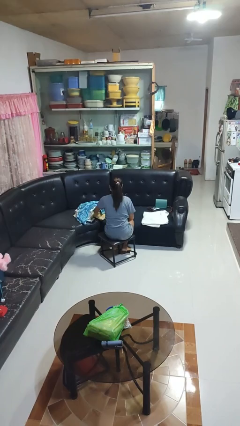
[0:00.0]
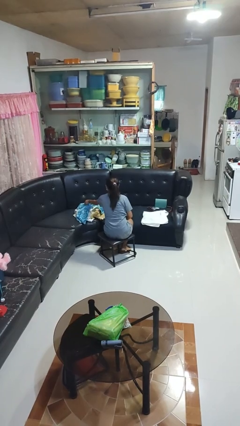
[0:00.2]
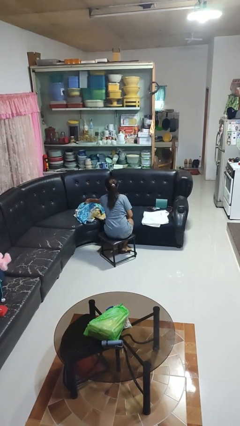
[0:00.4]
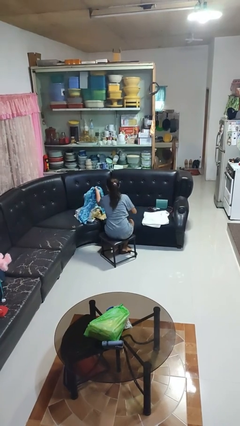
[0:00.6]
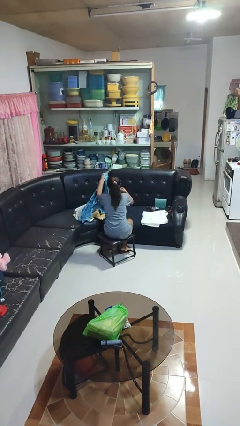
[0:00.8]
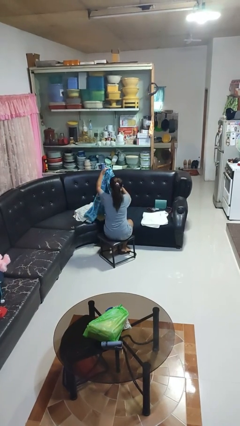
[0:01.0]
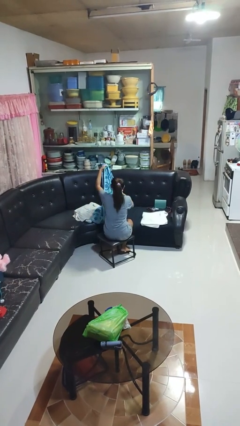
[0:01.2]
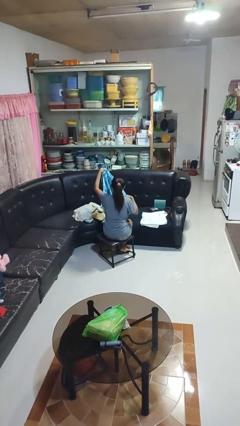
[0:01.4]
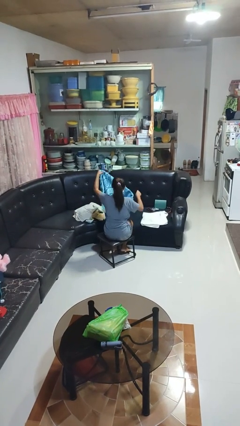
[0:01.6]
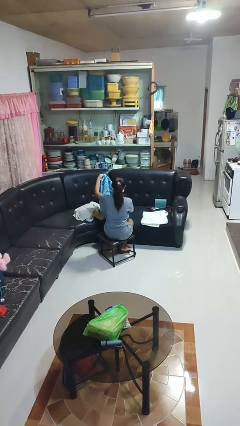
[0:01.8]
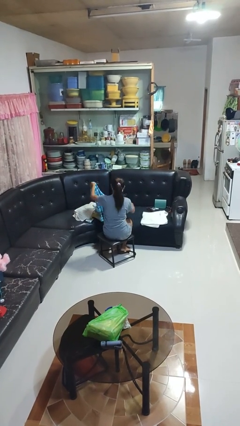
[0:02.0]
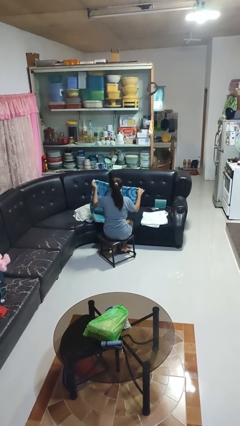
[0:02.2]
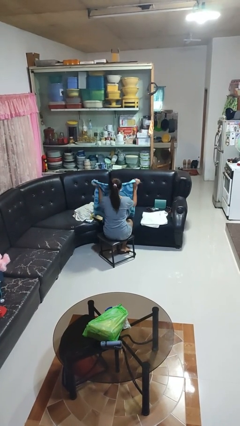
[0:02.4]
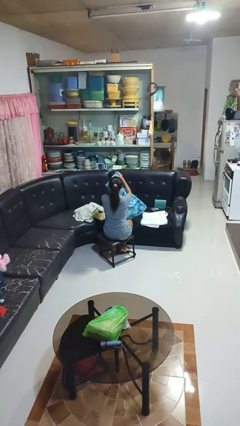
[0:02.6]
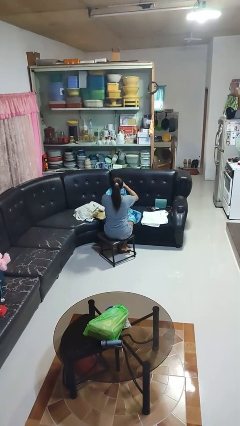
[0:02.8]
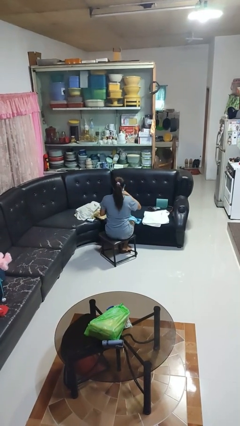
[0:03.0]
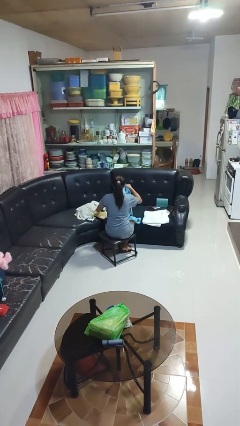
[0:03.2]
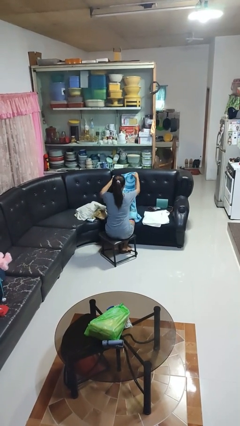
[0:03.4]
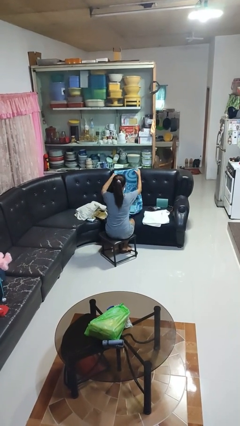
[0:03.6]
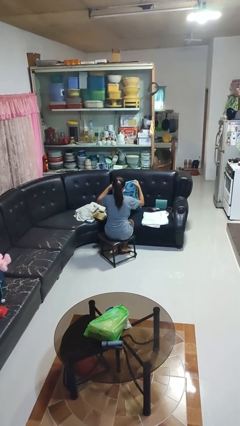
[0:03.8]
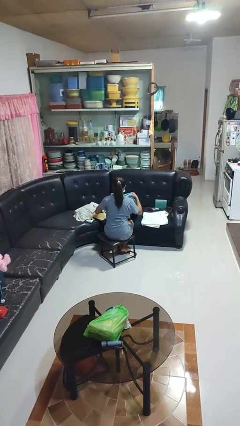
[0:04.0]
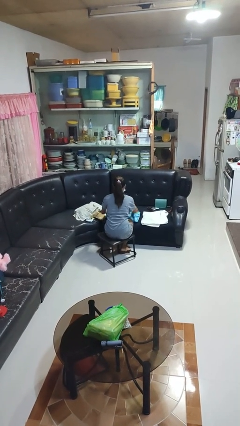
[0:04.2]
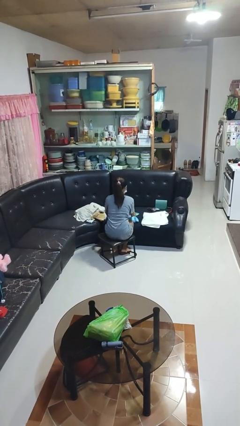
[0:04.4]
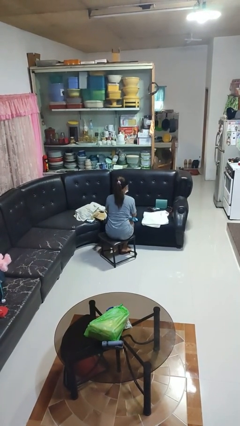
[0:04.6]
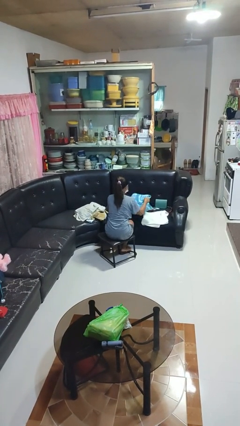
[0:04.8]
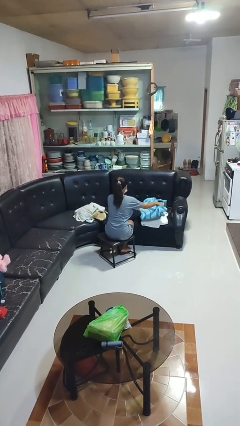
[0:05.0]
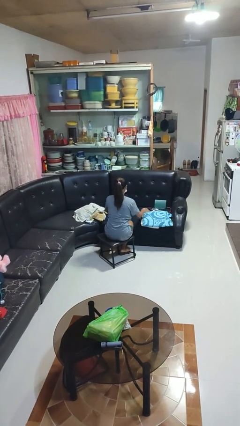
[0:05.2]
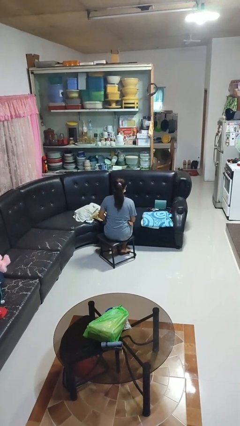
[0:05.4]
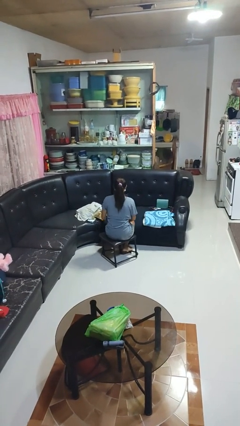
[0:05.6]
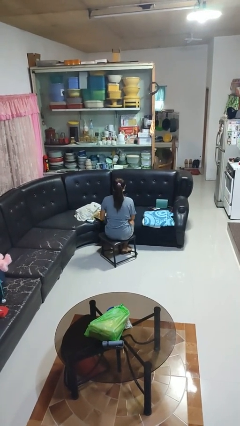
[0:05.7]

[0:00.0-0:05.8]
person folds towel

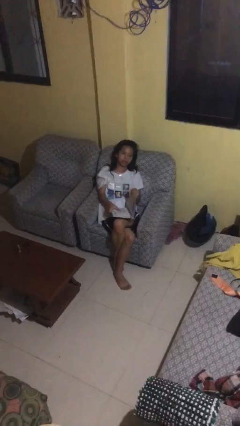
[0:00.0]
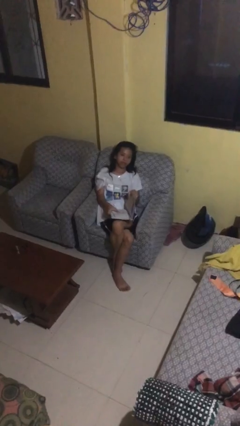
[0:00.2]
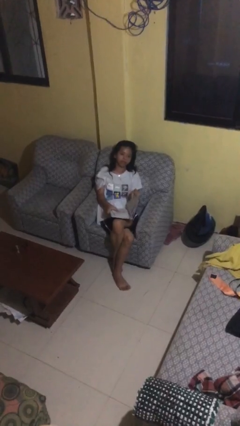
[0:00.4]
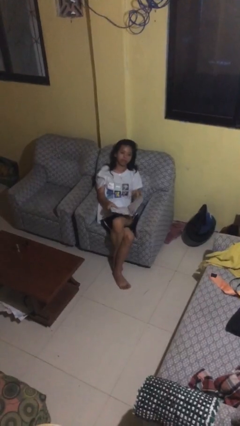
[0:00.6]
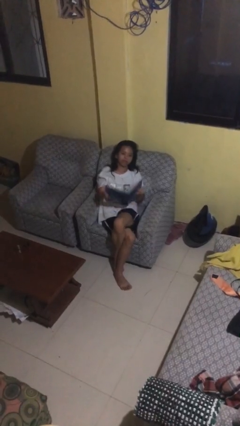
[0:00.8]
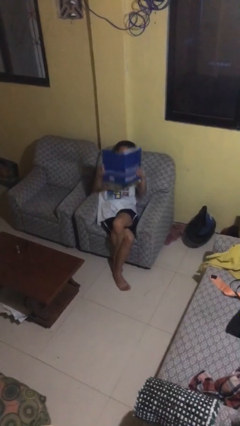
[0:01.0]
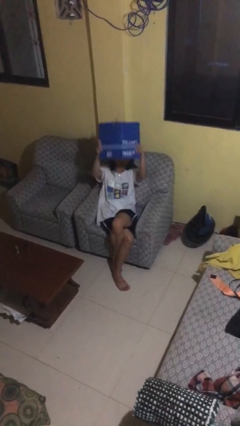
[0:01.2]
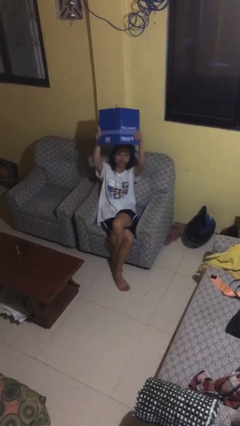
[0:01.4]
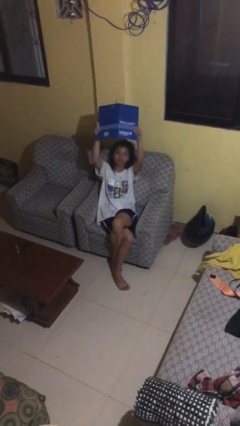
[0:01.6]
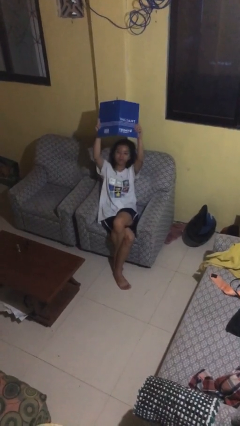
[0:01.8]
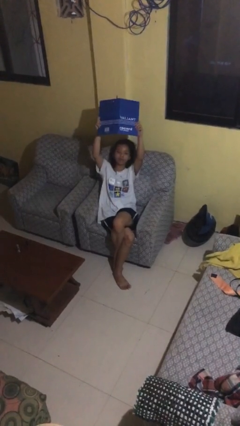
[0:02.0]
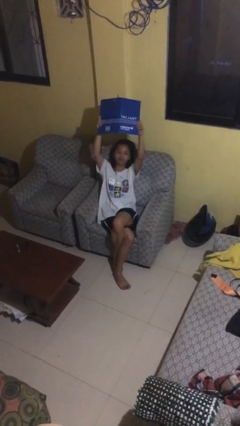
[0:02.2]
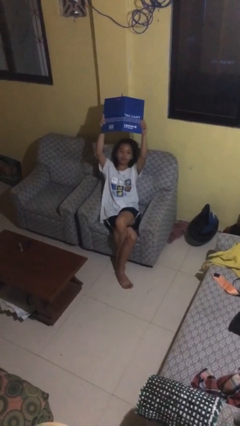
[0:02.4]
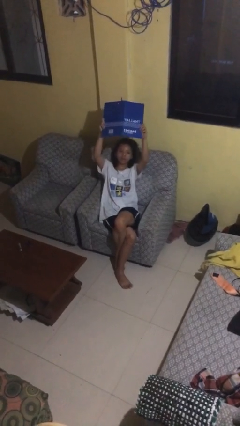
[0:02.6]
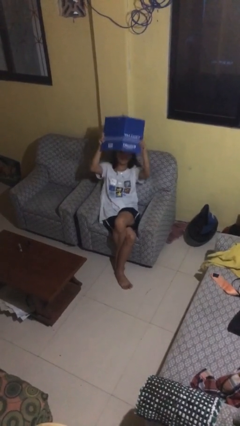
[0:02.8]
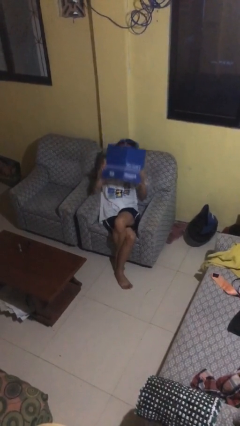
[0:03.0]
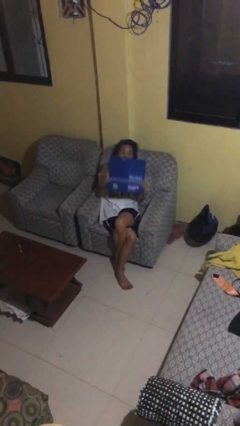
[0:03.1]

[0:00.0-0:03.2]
person holds object above head

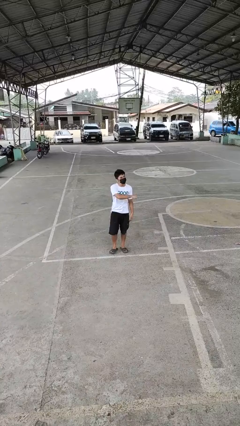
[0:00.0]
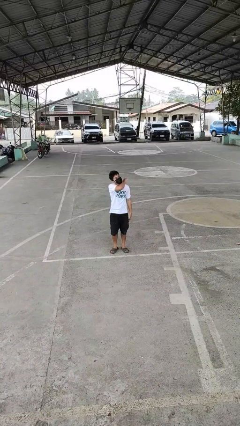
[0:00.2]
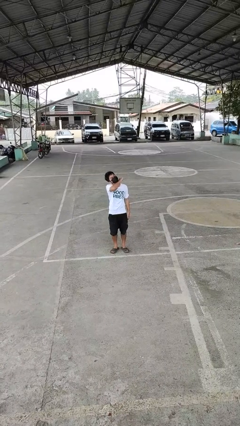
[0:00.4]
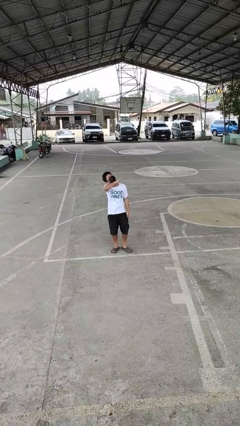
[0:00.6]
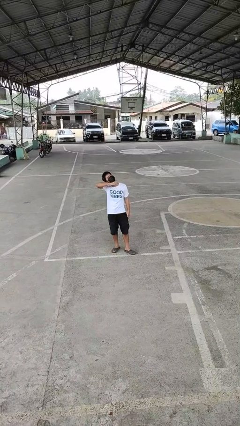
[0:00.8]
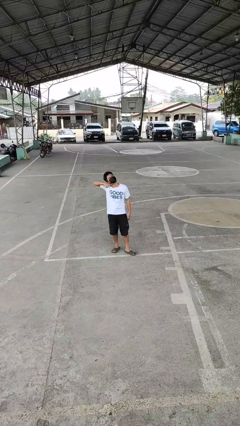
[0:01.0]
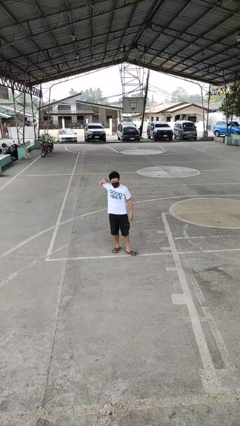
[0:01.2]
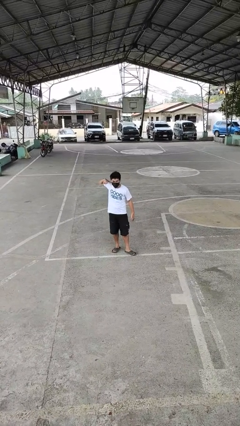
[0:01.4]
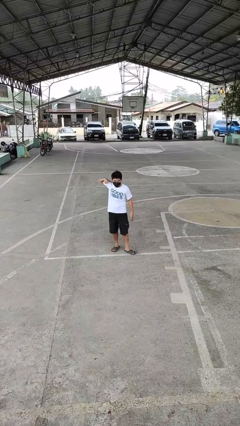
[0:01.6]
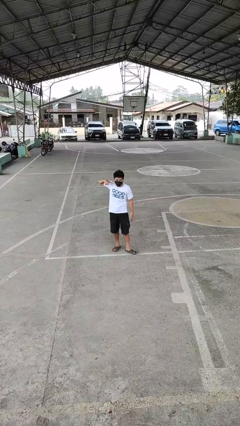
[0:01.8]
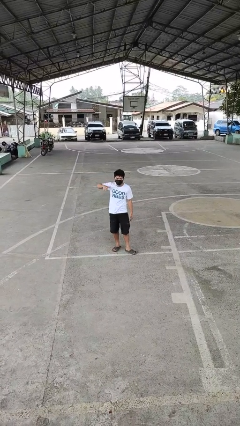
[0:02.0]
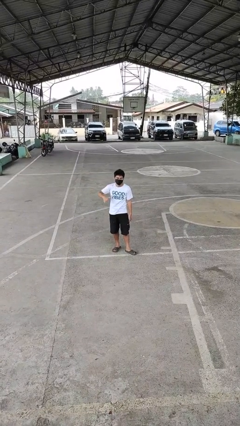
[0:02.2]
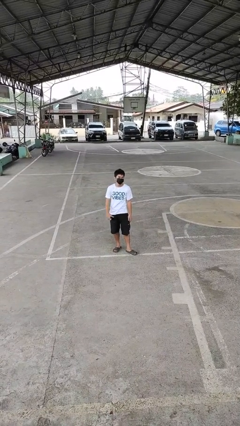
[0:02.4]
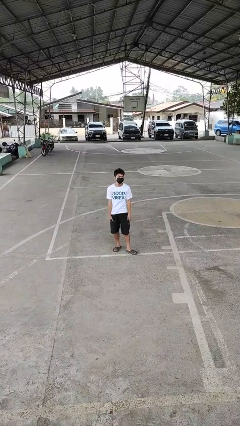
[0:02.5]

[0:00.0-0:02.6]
person gestures cut

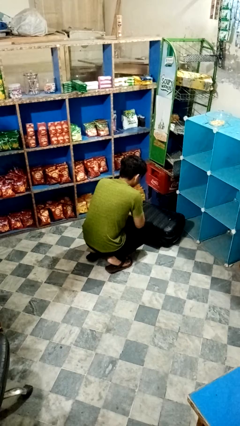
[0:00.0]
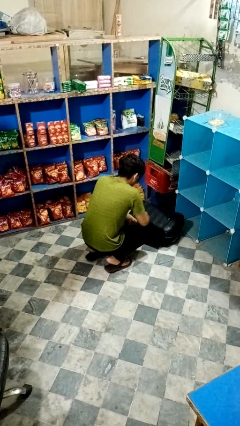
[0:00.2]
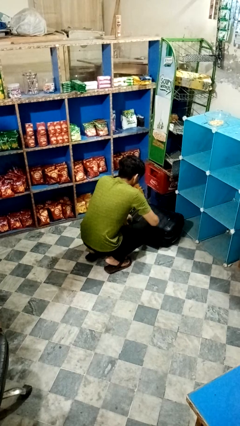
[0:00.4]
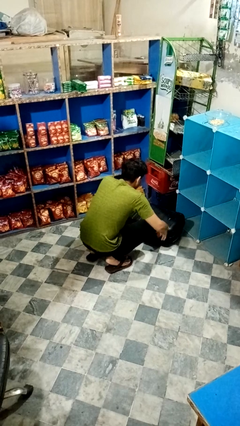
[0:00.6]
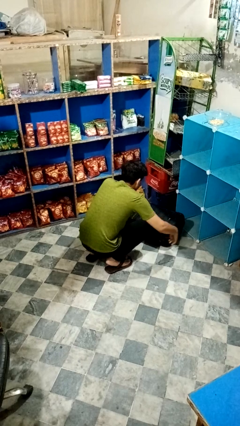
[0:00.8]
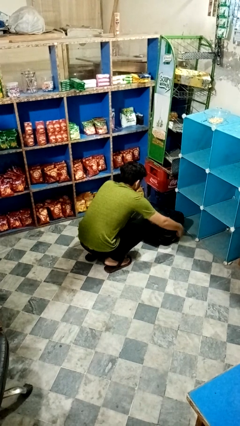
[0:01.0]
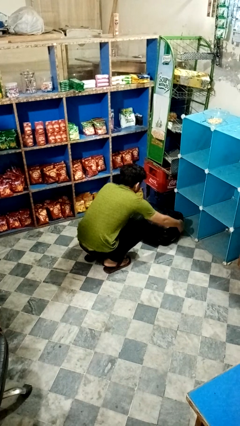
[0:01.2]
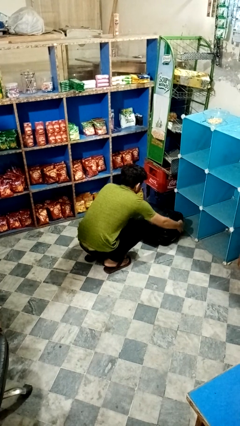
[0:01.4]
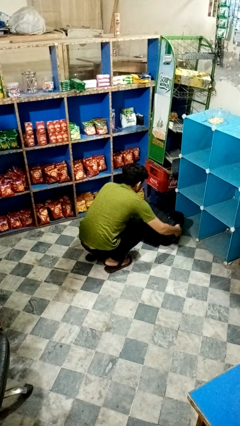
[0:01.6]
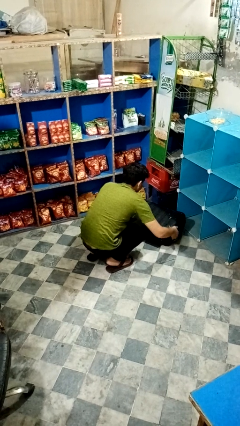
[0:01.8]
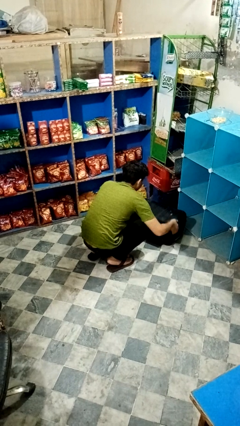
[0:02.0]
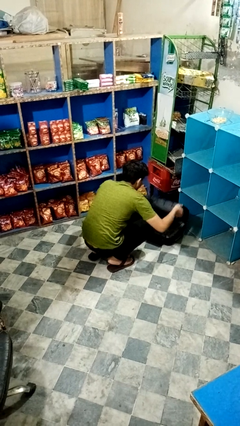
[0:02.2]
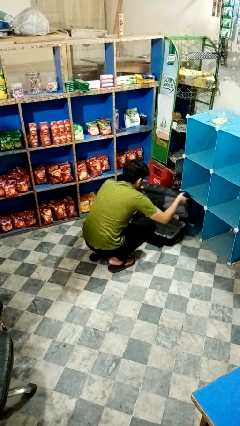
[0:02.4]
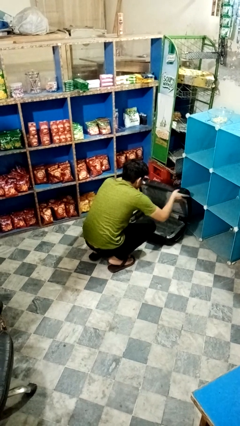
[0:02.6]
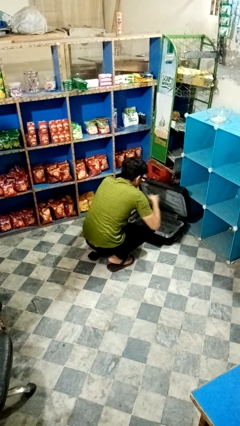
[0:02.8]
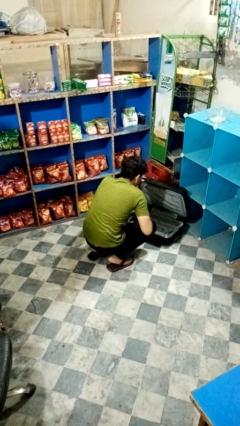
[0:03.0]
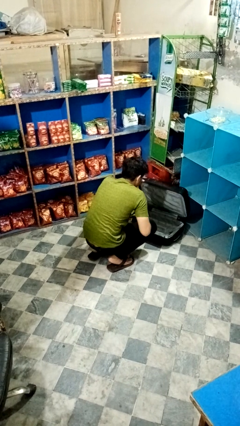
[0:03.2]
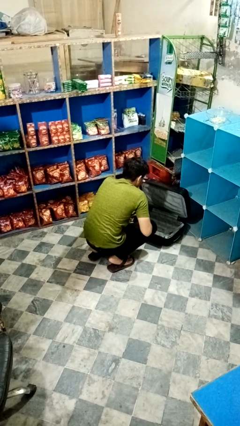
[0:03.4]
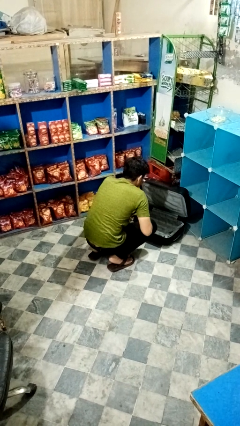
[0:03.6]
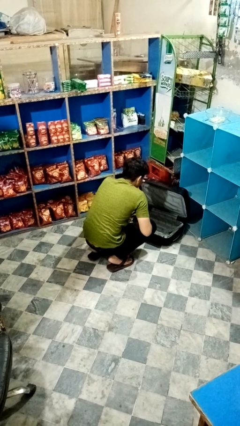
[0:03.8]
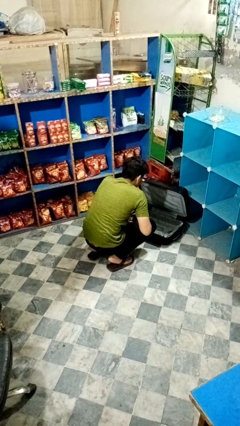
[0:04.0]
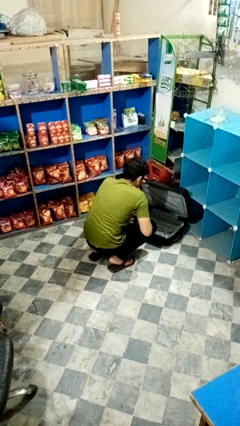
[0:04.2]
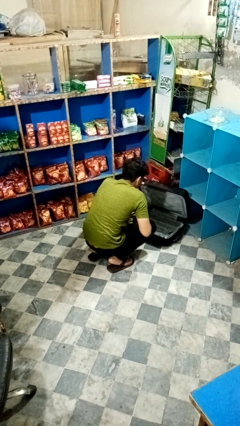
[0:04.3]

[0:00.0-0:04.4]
person opens suitcase

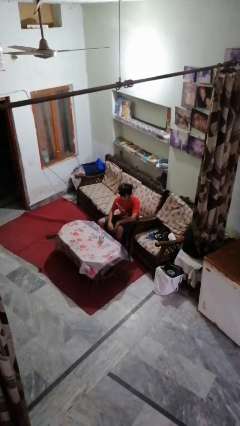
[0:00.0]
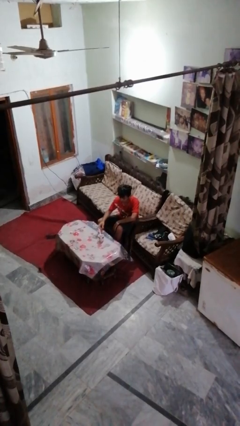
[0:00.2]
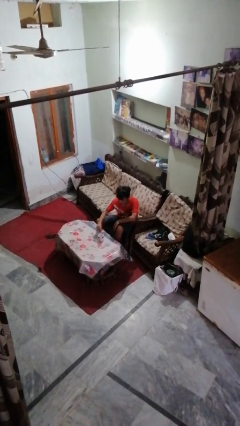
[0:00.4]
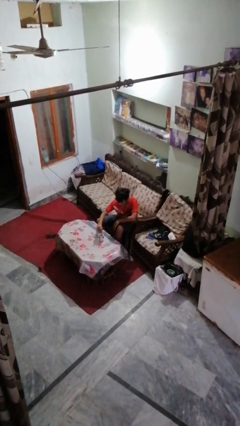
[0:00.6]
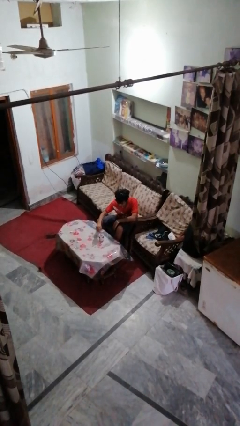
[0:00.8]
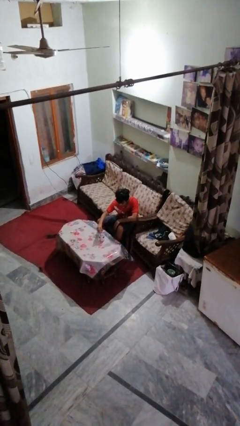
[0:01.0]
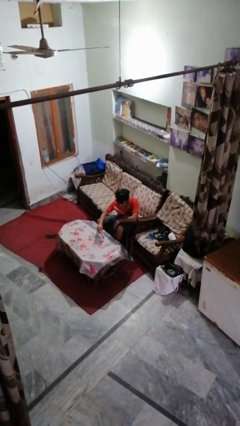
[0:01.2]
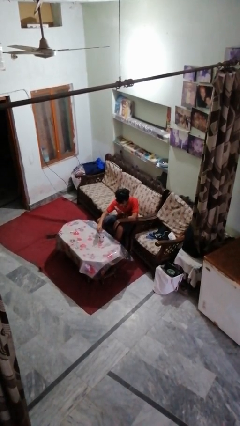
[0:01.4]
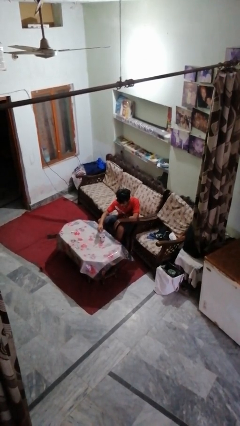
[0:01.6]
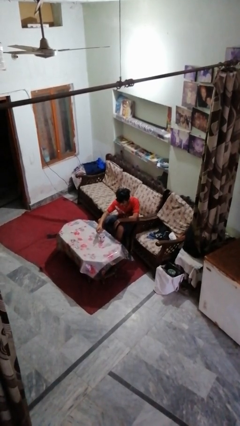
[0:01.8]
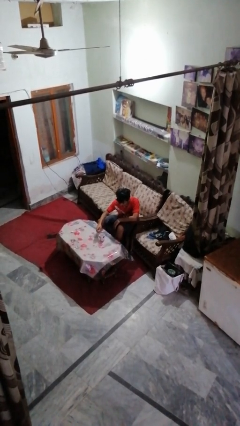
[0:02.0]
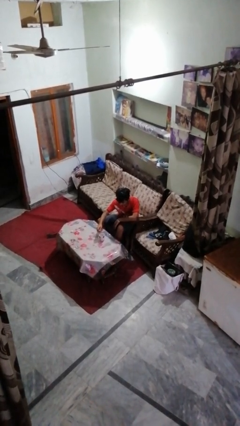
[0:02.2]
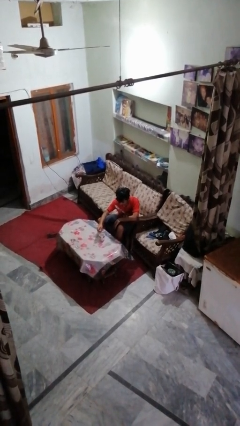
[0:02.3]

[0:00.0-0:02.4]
person stirs mug
